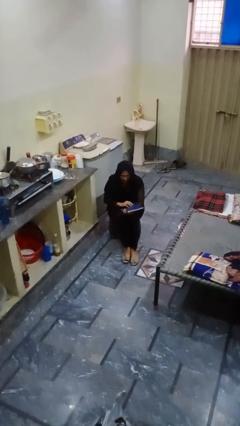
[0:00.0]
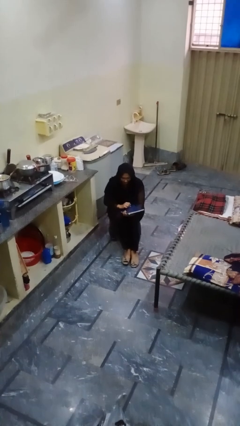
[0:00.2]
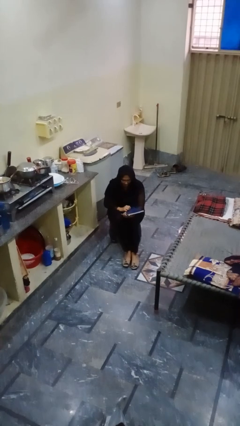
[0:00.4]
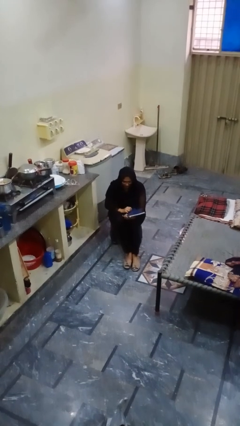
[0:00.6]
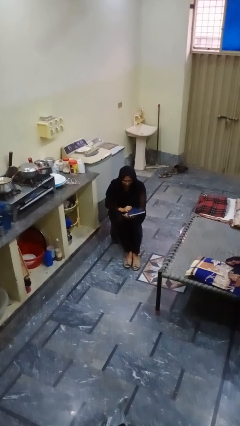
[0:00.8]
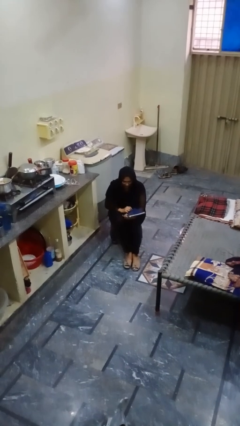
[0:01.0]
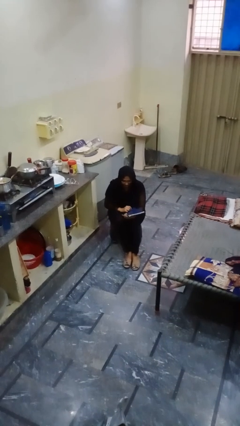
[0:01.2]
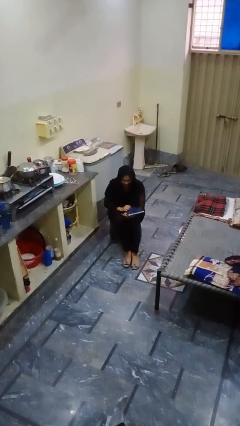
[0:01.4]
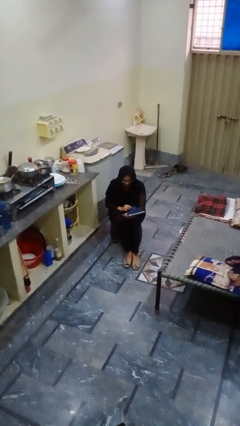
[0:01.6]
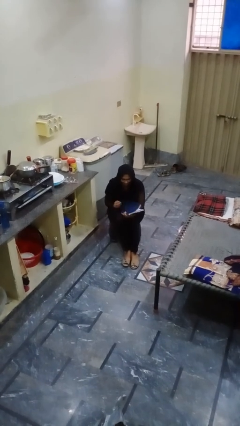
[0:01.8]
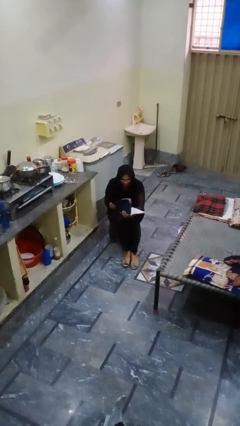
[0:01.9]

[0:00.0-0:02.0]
person reads magazine

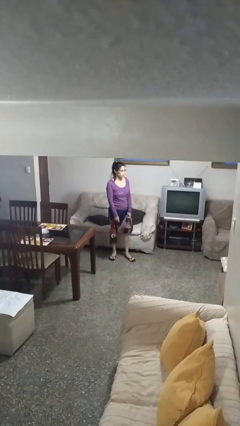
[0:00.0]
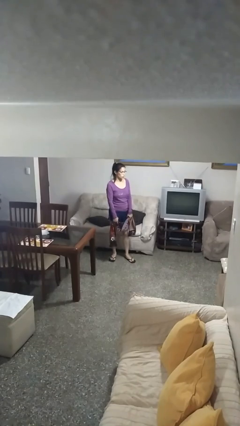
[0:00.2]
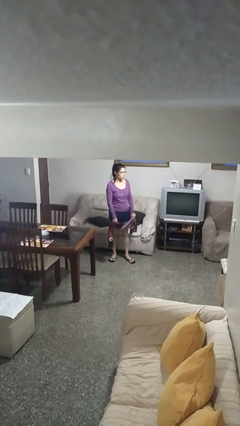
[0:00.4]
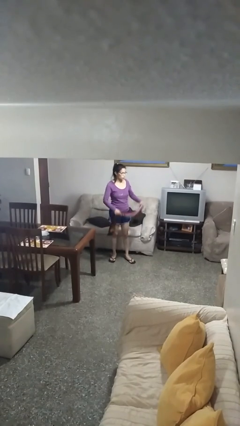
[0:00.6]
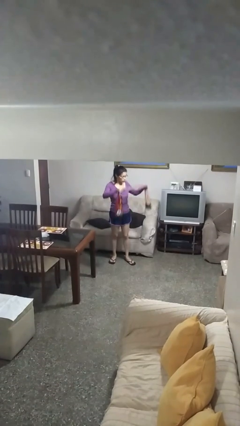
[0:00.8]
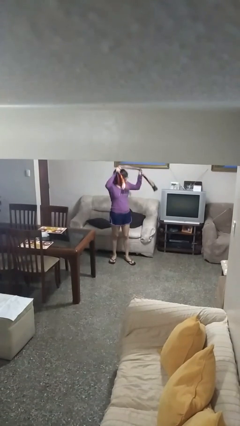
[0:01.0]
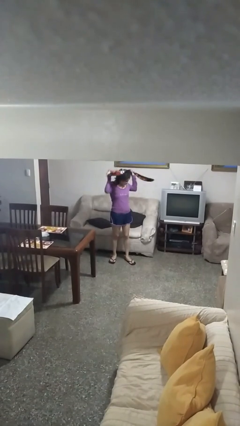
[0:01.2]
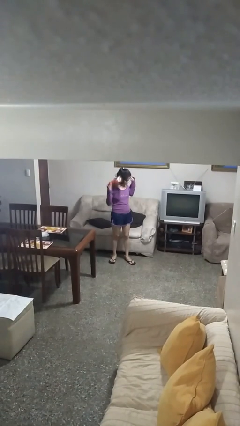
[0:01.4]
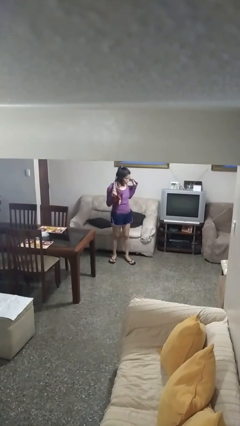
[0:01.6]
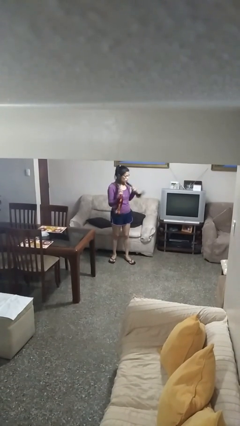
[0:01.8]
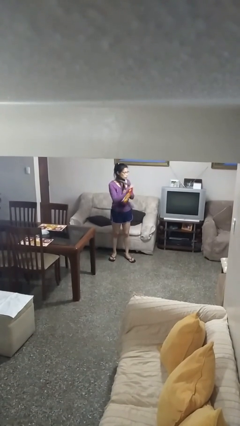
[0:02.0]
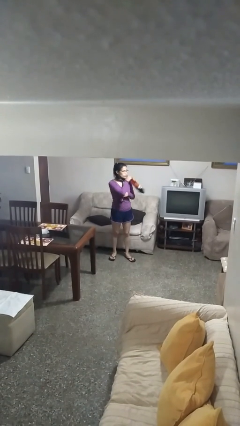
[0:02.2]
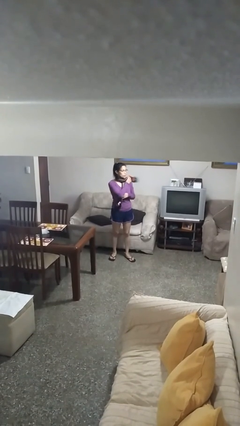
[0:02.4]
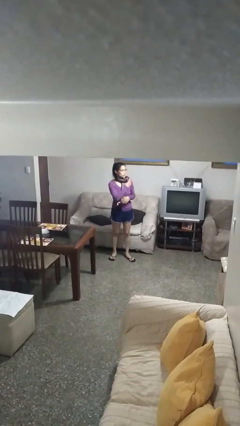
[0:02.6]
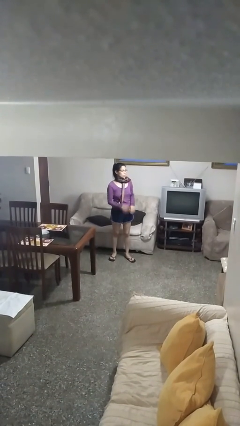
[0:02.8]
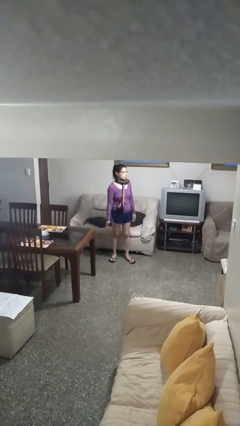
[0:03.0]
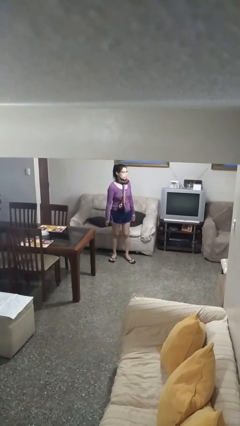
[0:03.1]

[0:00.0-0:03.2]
person puts on scarf

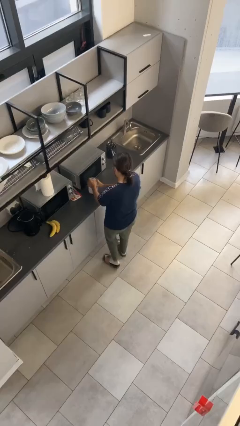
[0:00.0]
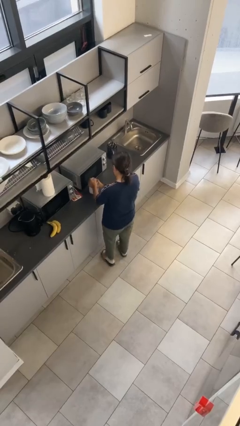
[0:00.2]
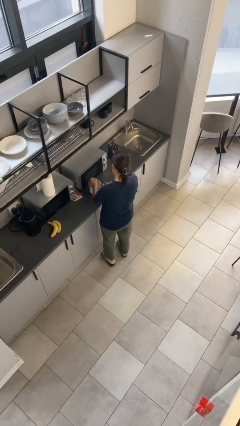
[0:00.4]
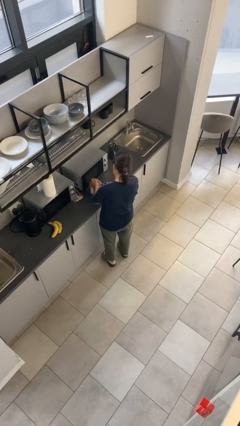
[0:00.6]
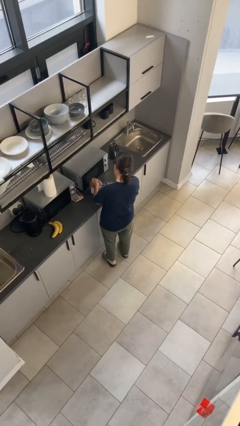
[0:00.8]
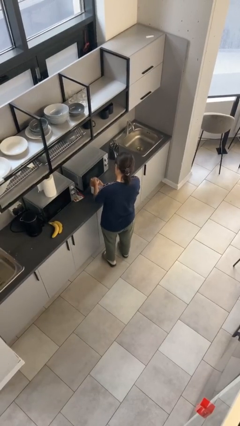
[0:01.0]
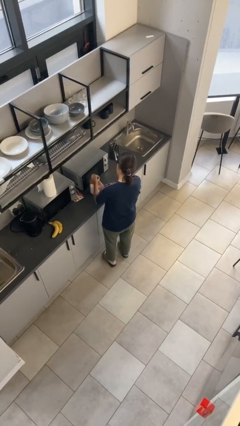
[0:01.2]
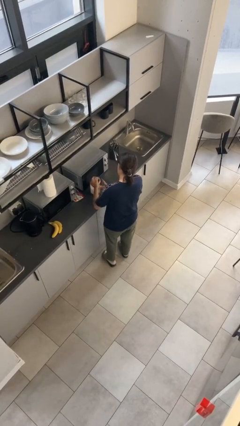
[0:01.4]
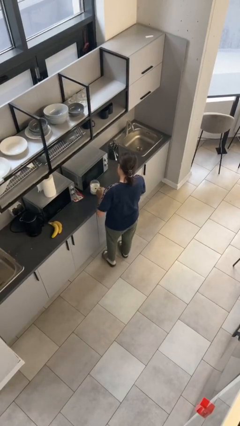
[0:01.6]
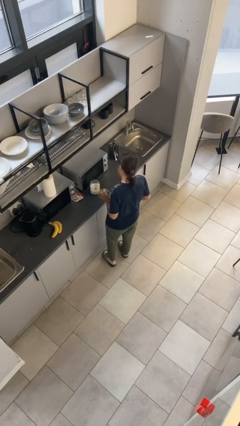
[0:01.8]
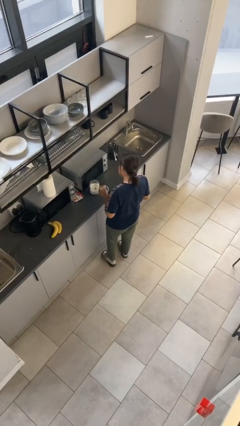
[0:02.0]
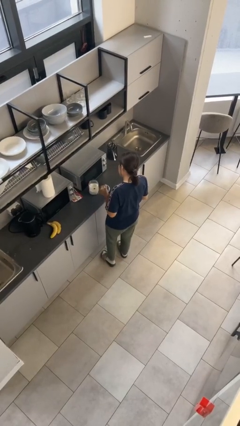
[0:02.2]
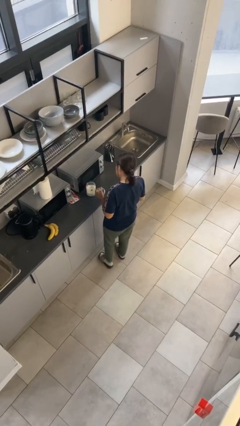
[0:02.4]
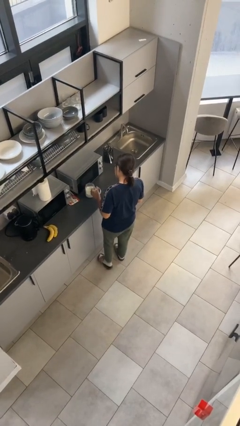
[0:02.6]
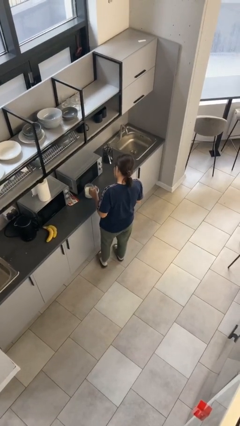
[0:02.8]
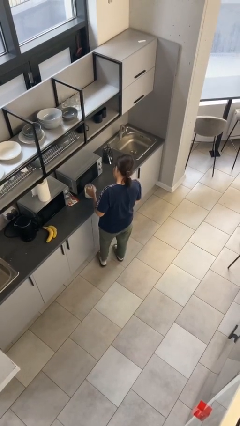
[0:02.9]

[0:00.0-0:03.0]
person opens jar

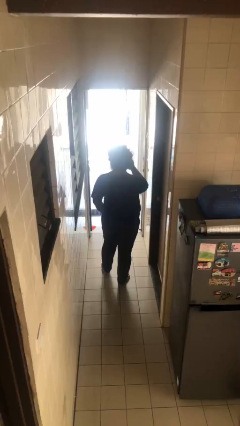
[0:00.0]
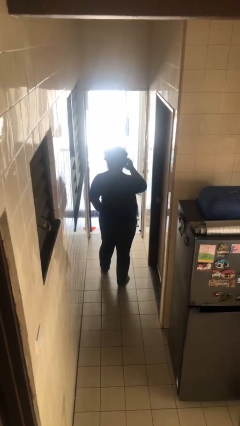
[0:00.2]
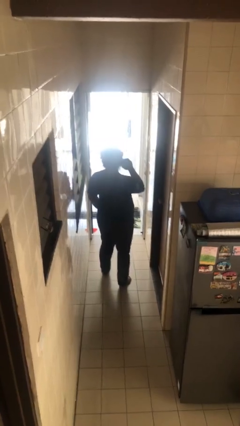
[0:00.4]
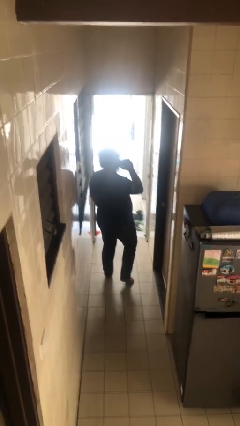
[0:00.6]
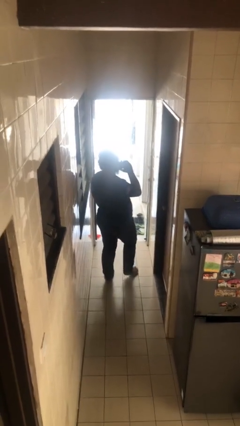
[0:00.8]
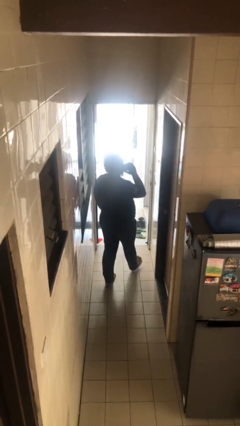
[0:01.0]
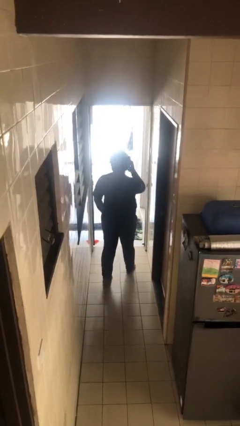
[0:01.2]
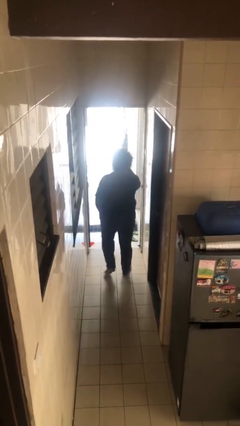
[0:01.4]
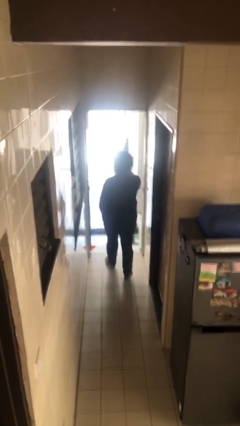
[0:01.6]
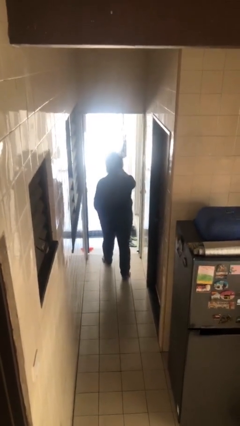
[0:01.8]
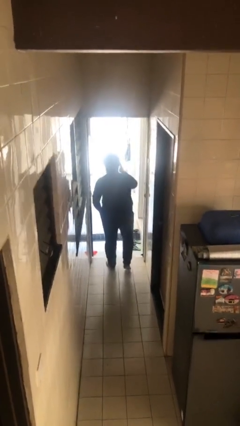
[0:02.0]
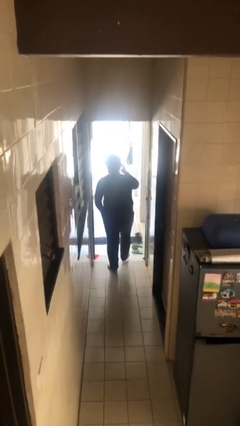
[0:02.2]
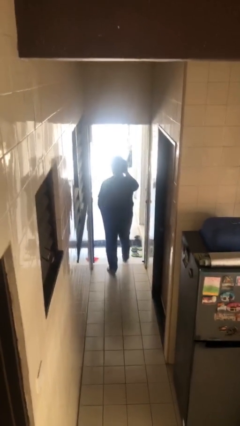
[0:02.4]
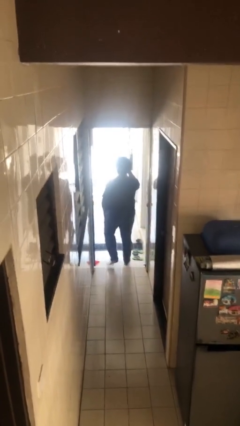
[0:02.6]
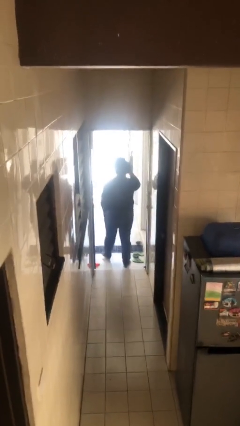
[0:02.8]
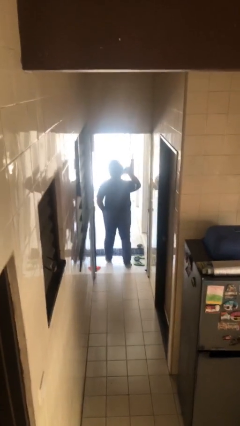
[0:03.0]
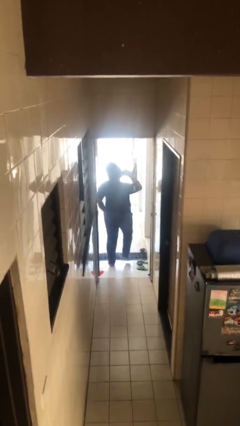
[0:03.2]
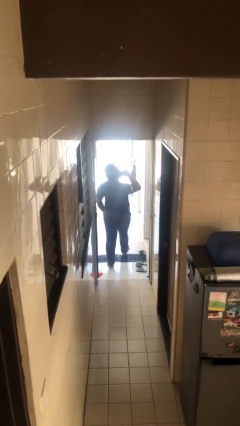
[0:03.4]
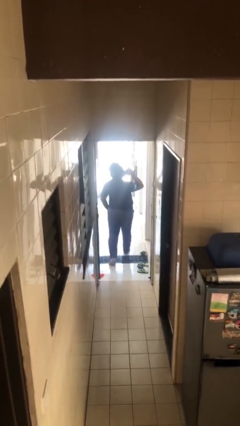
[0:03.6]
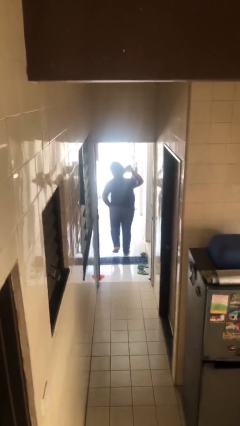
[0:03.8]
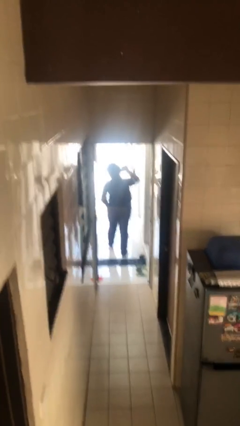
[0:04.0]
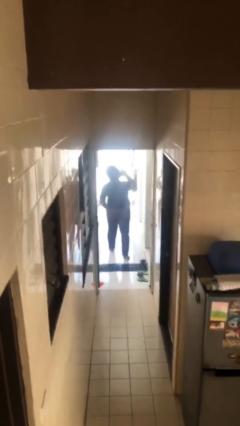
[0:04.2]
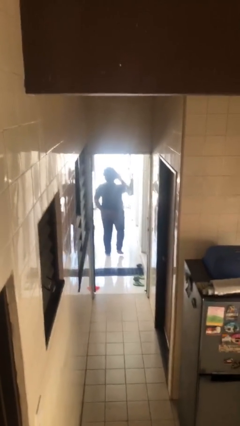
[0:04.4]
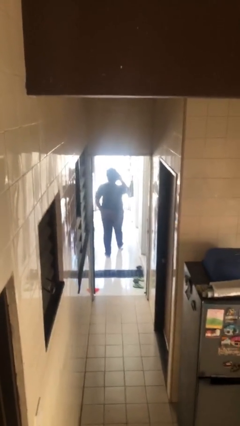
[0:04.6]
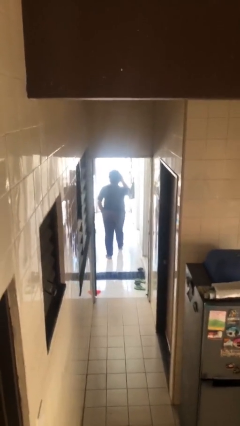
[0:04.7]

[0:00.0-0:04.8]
person exits scene through structure

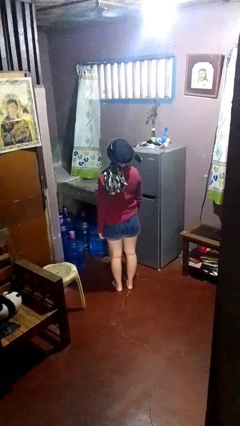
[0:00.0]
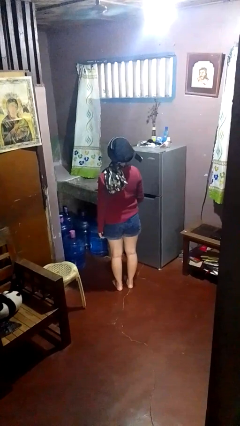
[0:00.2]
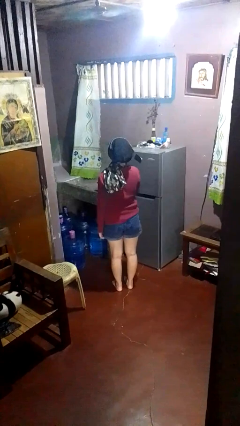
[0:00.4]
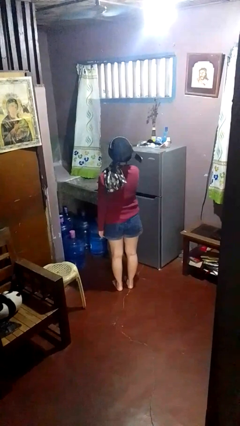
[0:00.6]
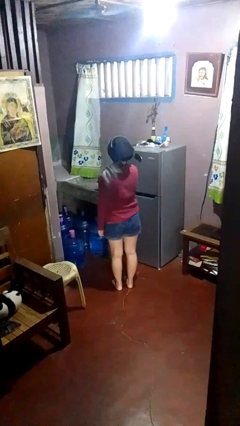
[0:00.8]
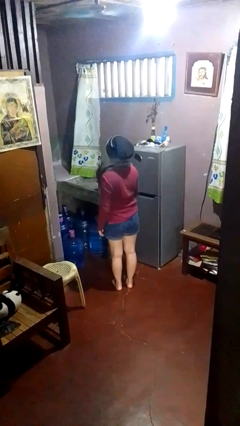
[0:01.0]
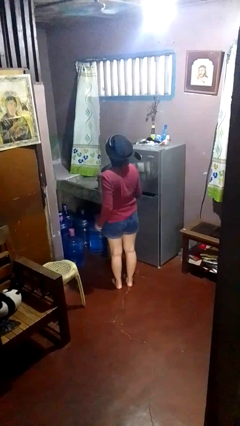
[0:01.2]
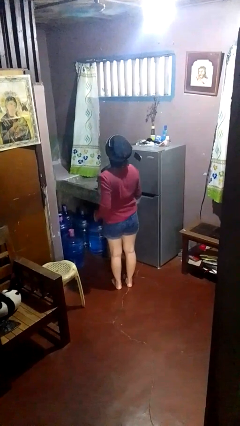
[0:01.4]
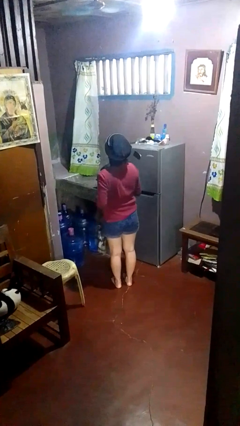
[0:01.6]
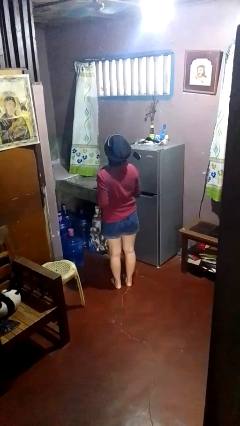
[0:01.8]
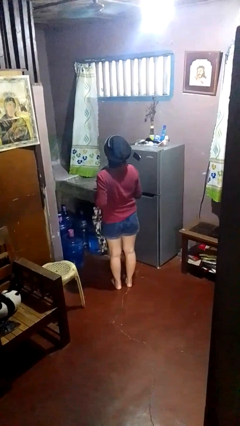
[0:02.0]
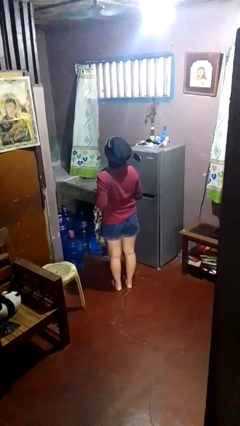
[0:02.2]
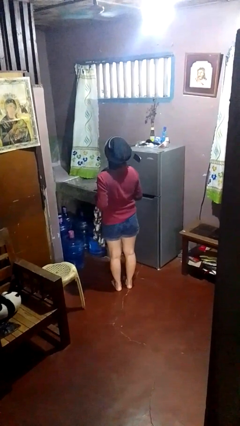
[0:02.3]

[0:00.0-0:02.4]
person takes off scarf

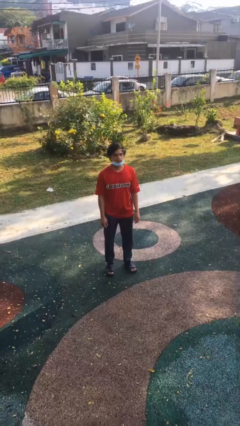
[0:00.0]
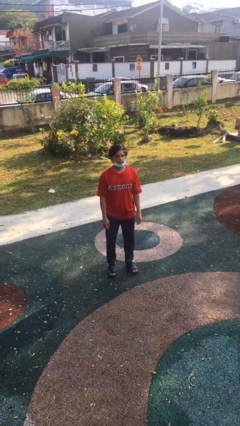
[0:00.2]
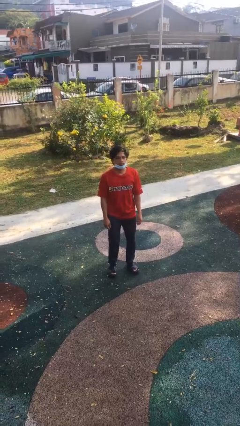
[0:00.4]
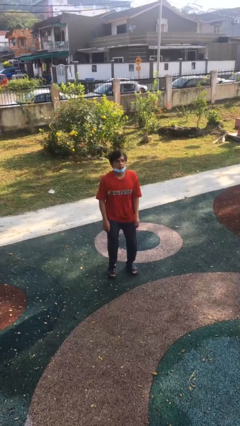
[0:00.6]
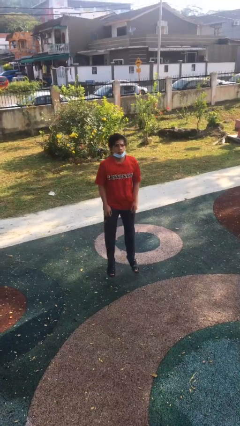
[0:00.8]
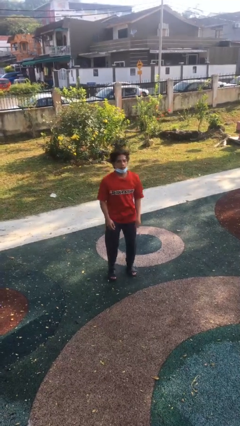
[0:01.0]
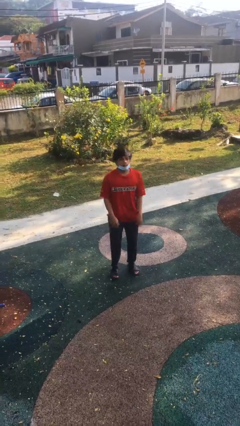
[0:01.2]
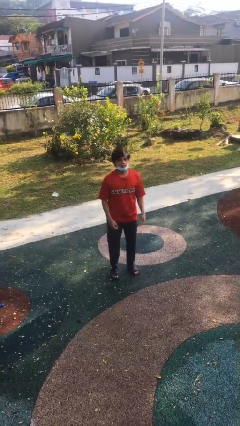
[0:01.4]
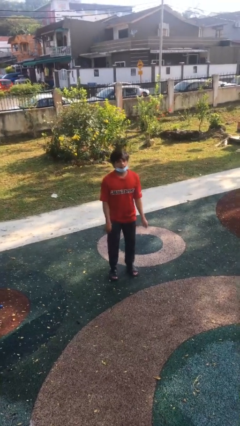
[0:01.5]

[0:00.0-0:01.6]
person jumps
